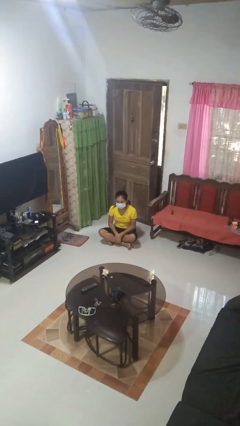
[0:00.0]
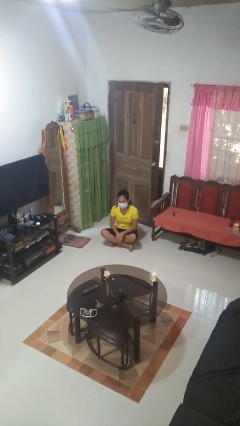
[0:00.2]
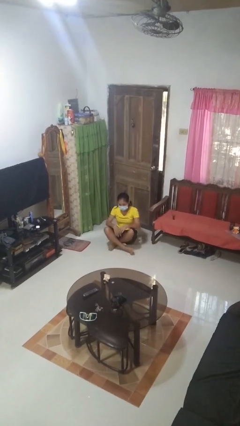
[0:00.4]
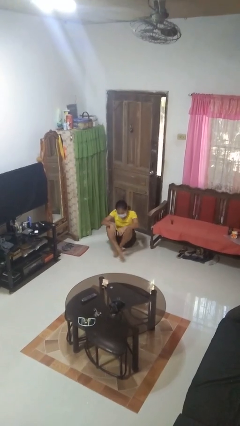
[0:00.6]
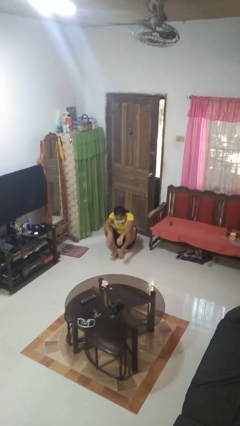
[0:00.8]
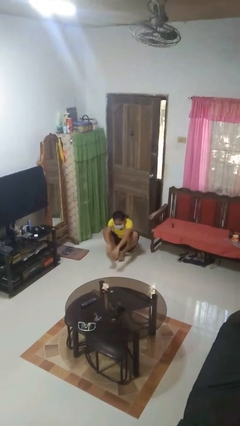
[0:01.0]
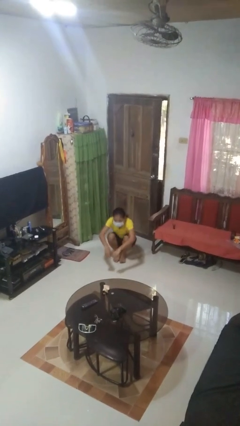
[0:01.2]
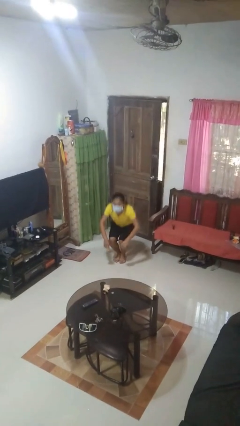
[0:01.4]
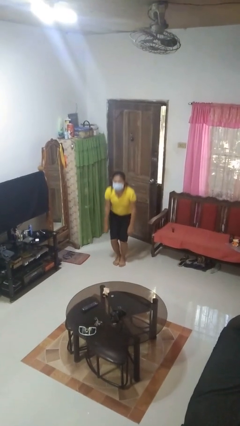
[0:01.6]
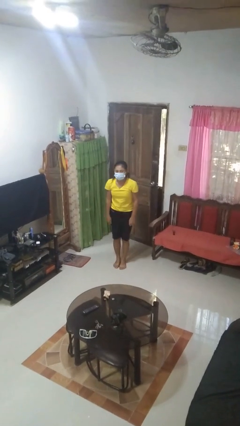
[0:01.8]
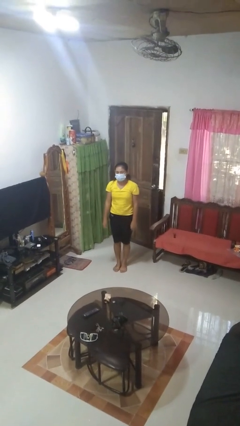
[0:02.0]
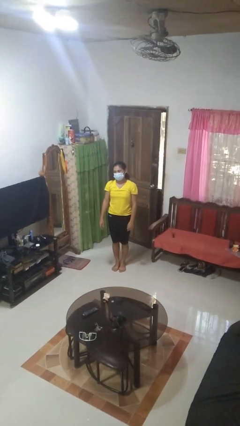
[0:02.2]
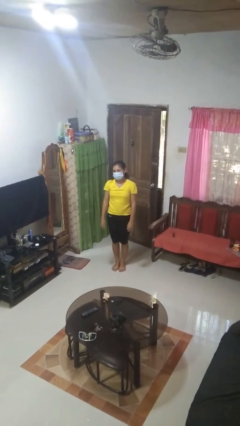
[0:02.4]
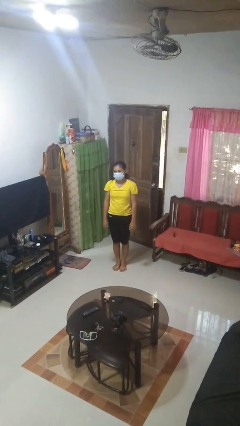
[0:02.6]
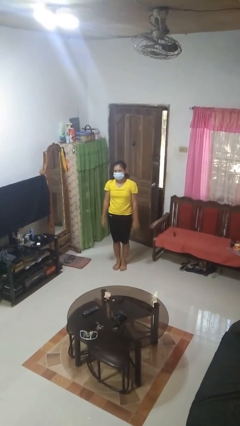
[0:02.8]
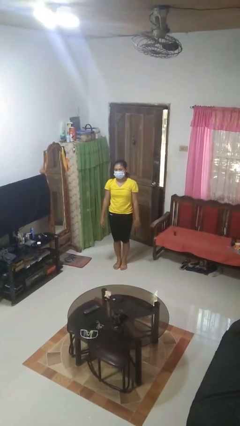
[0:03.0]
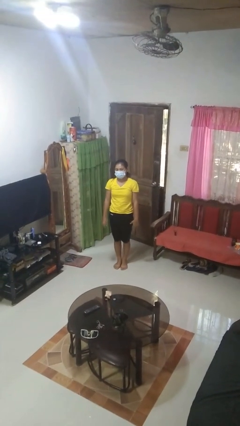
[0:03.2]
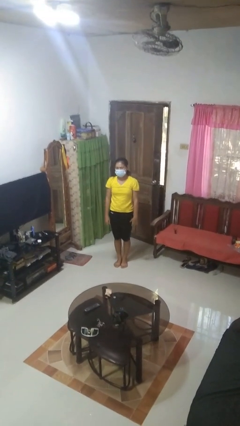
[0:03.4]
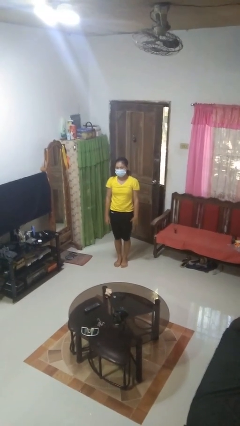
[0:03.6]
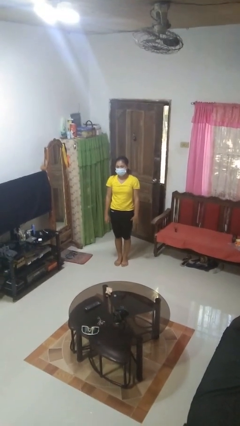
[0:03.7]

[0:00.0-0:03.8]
person stands up from floor

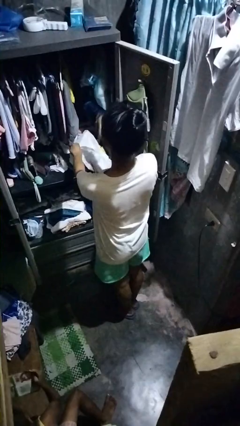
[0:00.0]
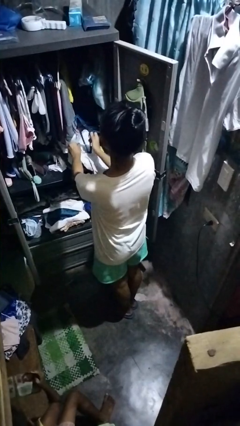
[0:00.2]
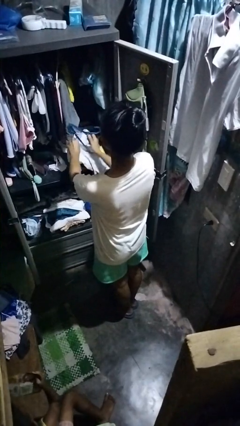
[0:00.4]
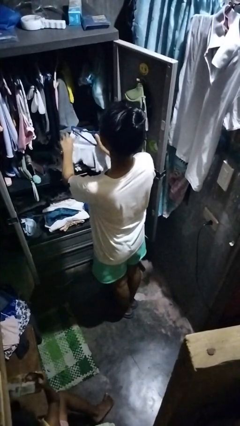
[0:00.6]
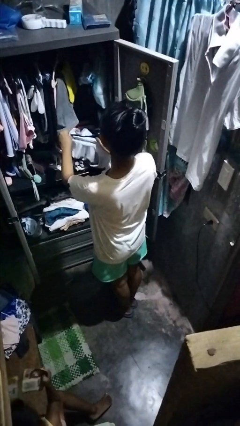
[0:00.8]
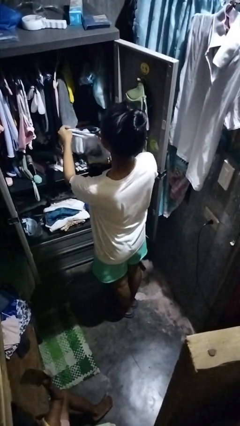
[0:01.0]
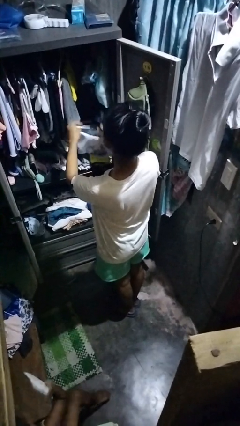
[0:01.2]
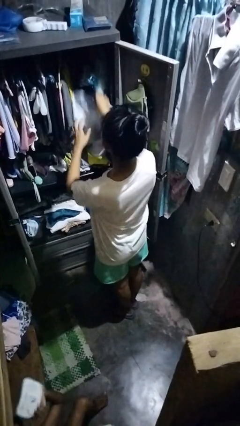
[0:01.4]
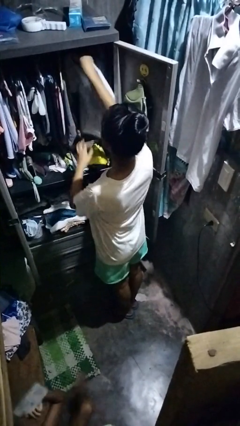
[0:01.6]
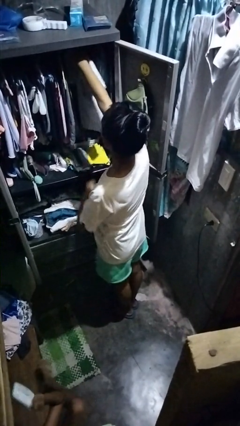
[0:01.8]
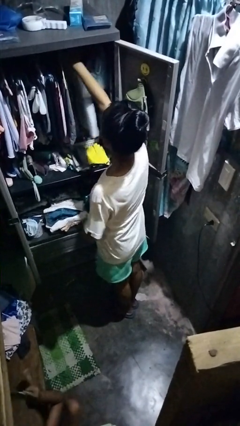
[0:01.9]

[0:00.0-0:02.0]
person puts clothes into closet

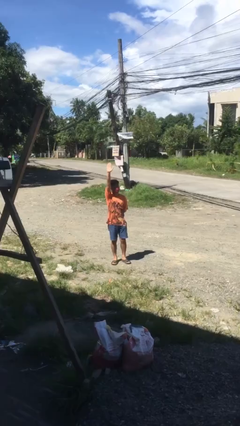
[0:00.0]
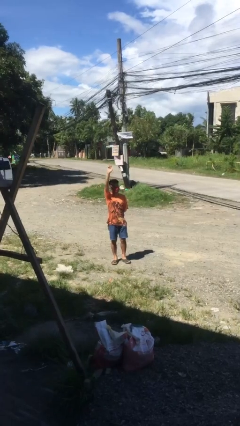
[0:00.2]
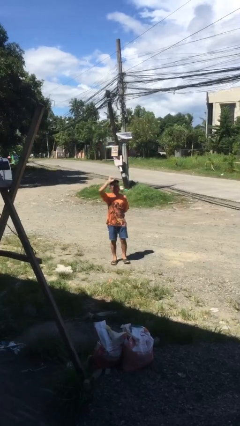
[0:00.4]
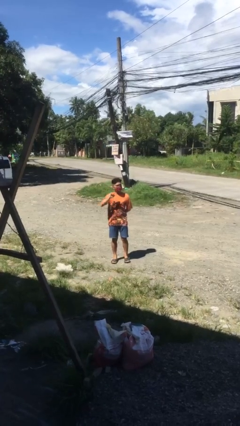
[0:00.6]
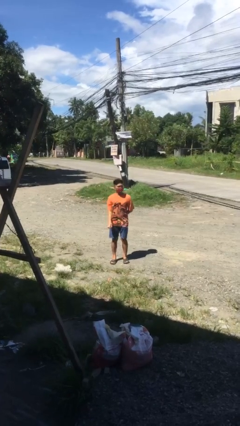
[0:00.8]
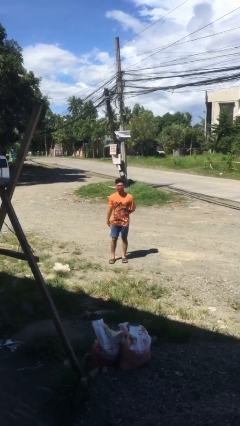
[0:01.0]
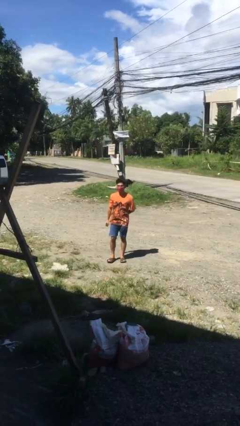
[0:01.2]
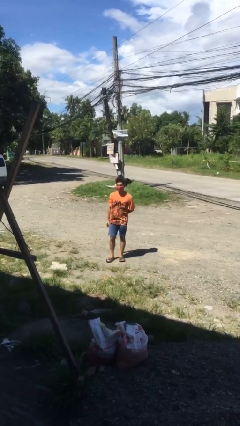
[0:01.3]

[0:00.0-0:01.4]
person gestures lower hand

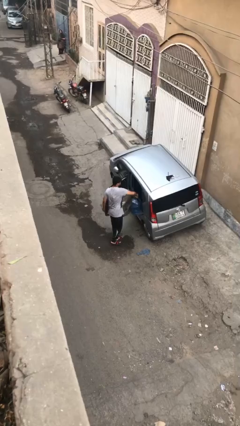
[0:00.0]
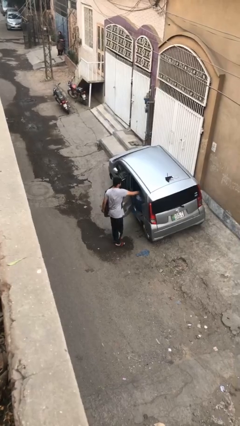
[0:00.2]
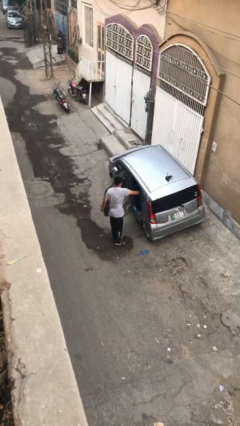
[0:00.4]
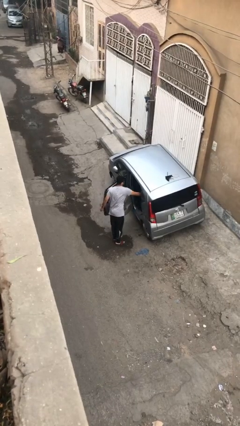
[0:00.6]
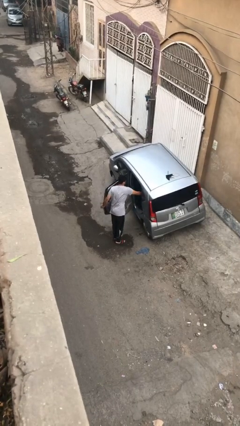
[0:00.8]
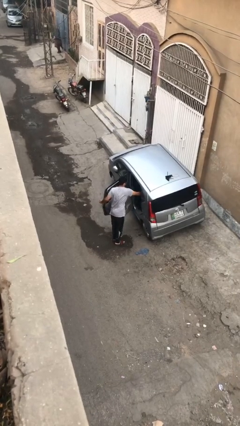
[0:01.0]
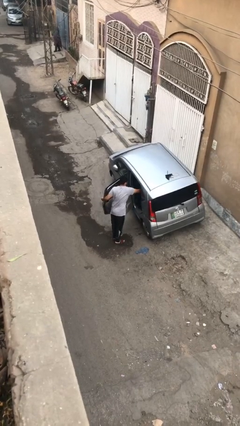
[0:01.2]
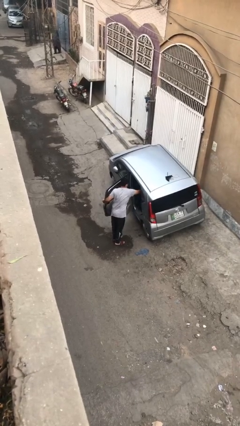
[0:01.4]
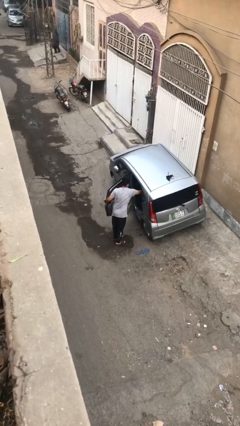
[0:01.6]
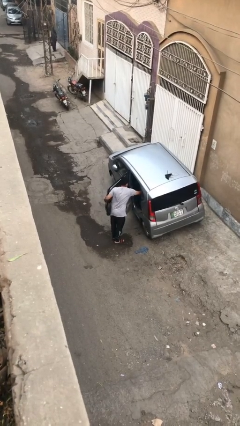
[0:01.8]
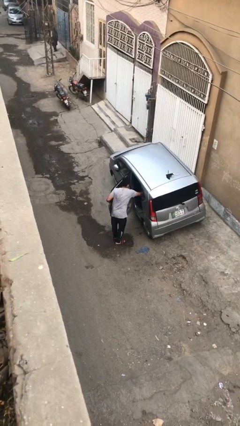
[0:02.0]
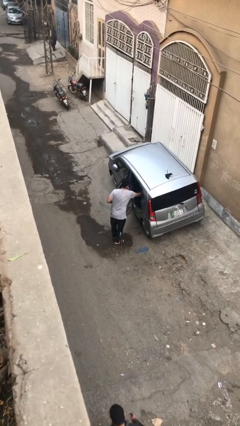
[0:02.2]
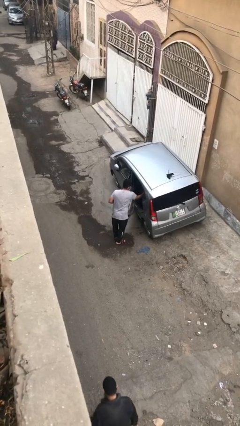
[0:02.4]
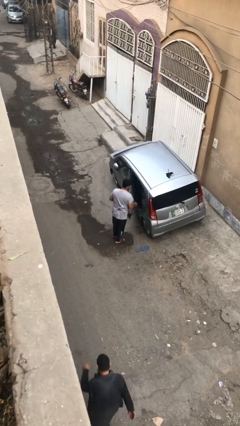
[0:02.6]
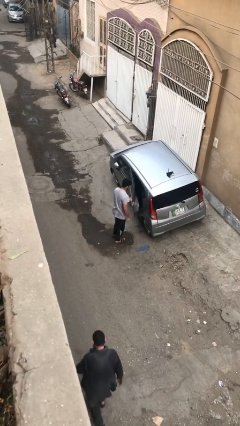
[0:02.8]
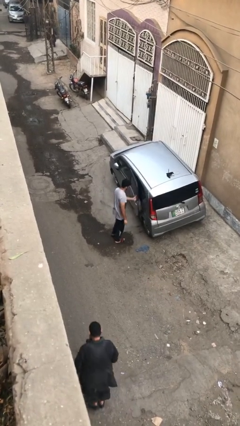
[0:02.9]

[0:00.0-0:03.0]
person loads car

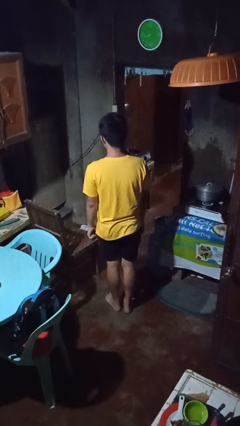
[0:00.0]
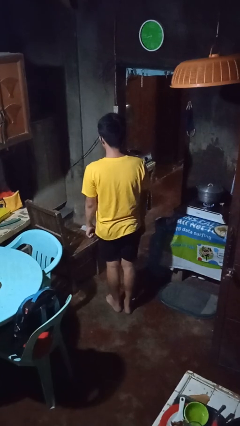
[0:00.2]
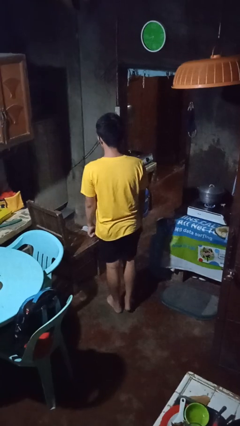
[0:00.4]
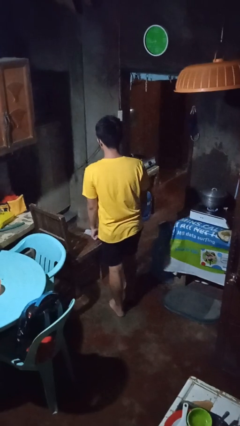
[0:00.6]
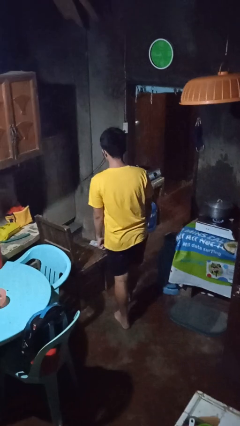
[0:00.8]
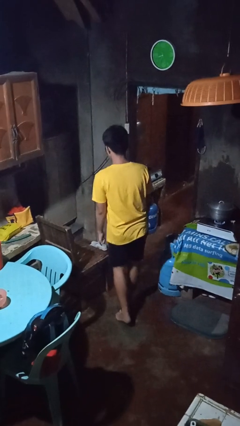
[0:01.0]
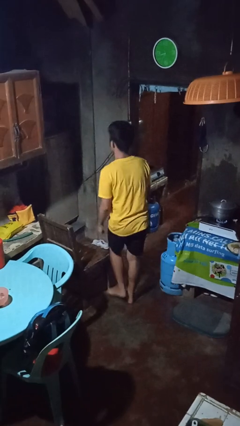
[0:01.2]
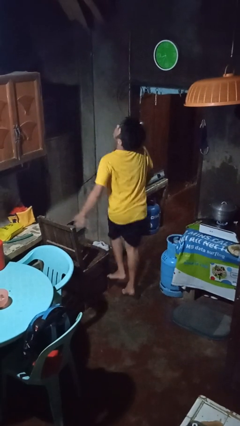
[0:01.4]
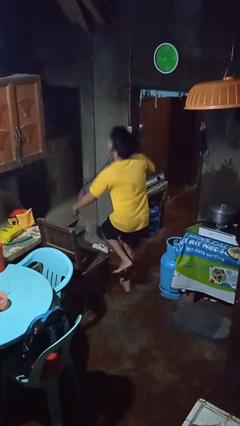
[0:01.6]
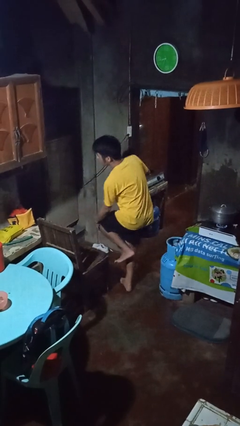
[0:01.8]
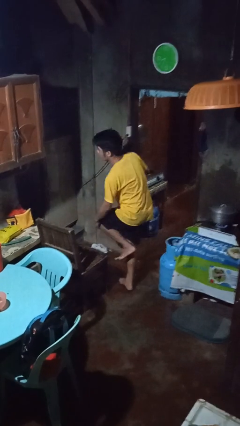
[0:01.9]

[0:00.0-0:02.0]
person trips on object on floor

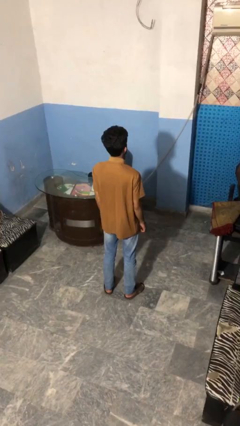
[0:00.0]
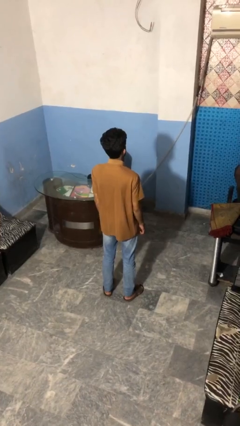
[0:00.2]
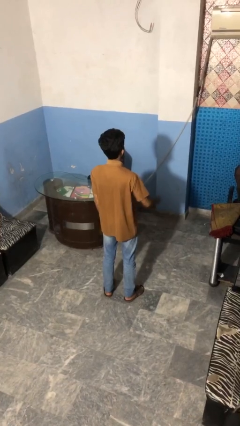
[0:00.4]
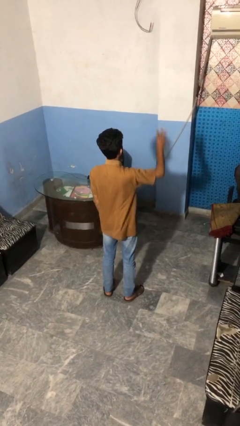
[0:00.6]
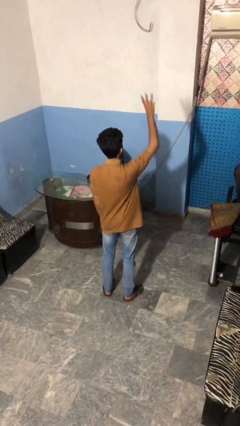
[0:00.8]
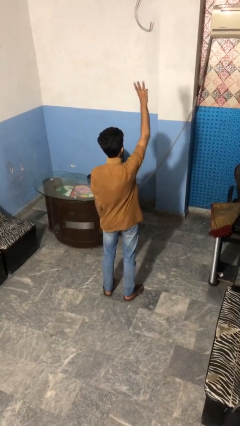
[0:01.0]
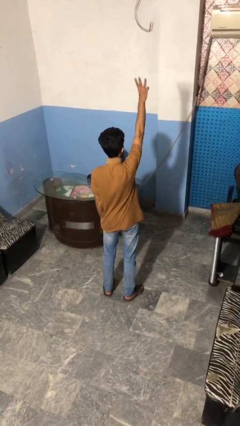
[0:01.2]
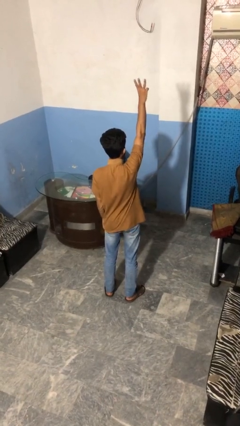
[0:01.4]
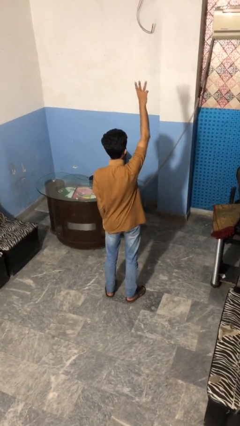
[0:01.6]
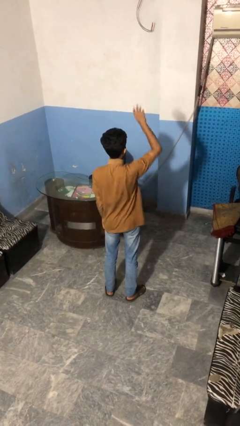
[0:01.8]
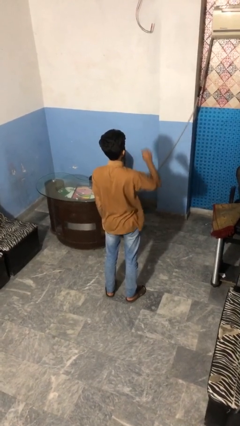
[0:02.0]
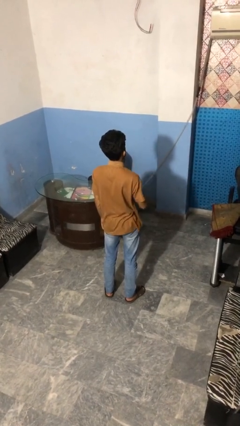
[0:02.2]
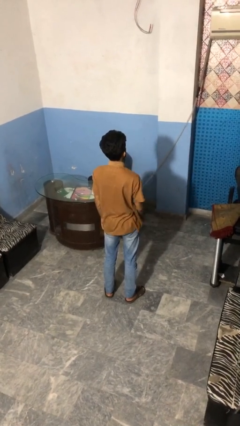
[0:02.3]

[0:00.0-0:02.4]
person gestures number three

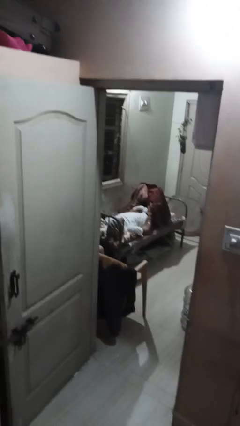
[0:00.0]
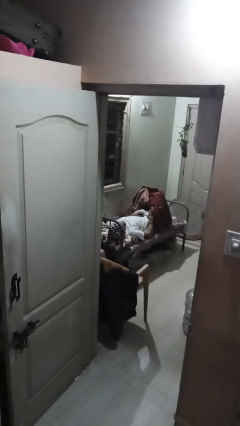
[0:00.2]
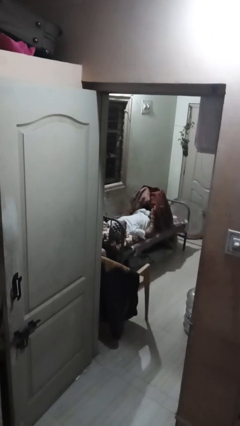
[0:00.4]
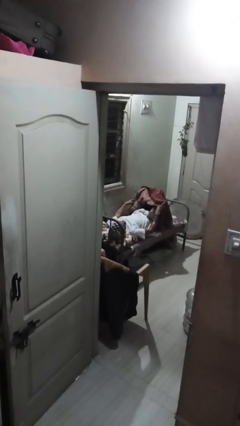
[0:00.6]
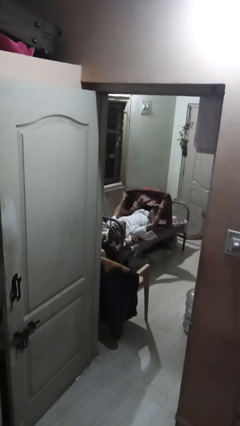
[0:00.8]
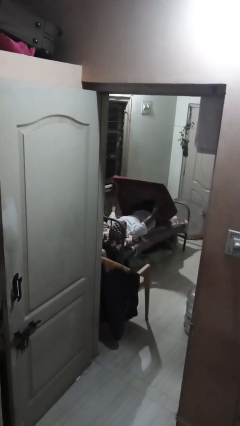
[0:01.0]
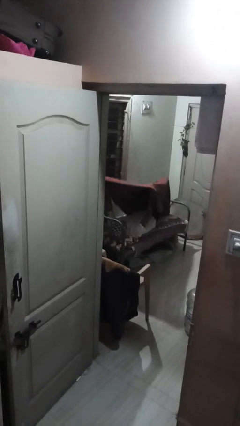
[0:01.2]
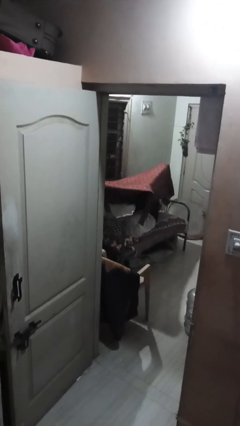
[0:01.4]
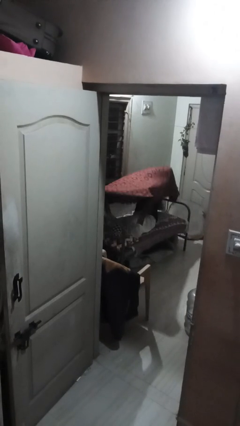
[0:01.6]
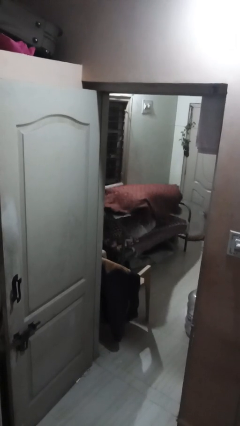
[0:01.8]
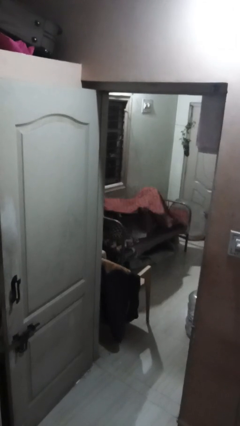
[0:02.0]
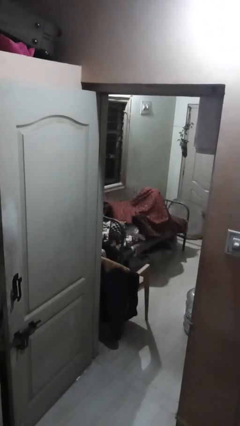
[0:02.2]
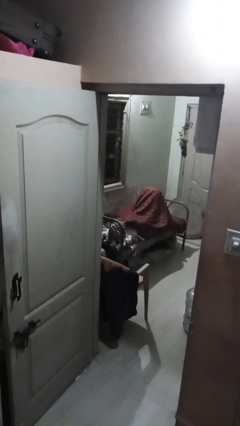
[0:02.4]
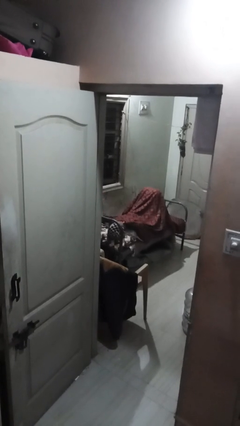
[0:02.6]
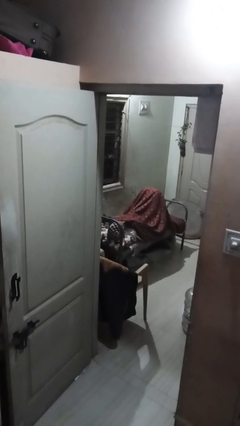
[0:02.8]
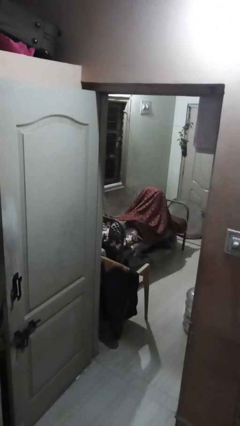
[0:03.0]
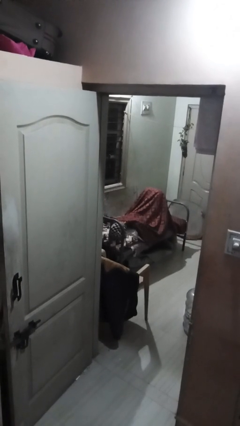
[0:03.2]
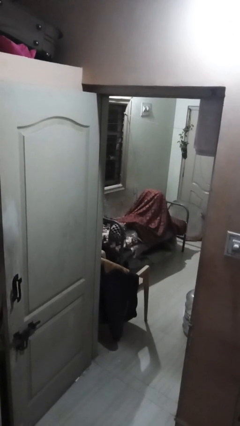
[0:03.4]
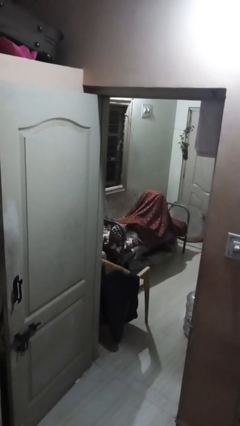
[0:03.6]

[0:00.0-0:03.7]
person covers with bedsheets
